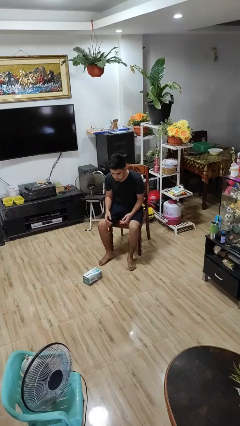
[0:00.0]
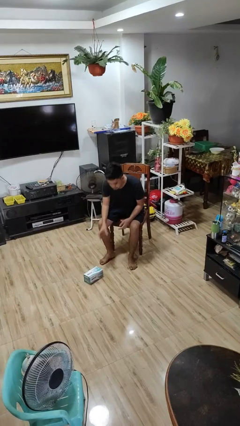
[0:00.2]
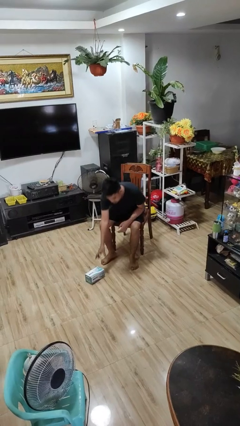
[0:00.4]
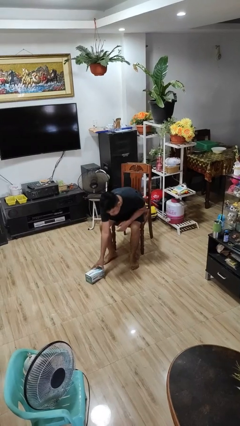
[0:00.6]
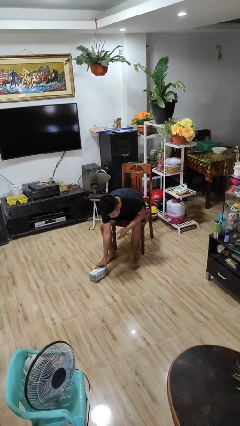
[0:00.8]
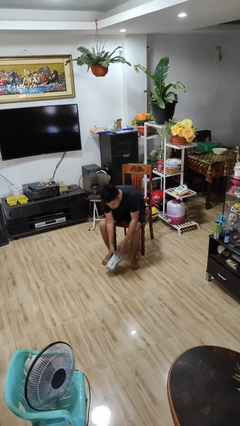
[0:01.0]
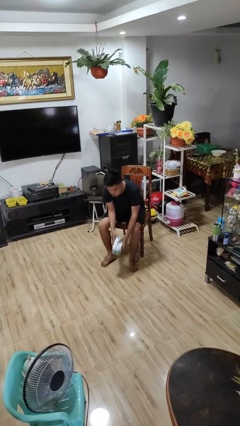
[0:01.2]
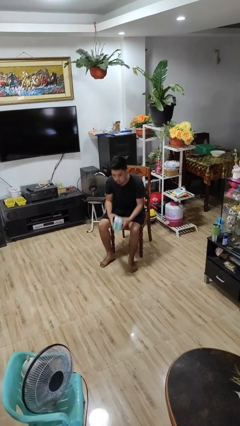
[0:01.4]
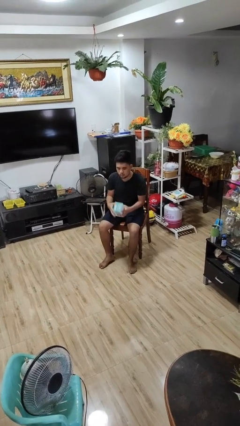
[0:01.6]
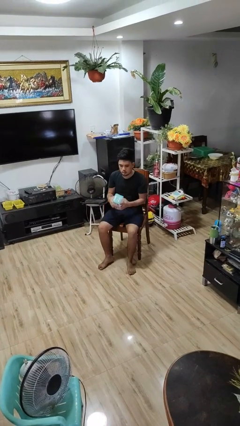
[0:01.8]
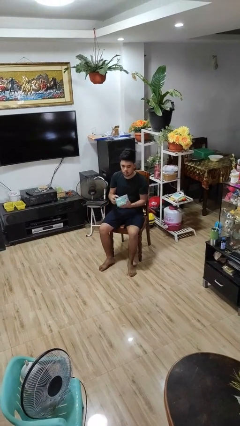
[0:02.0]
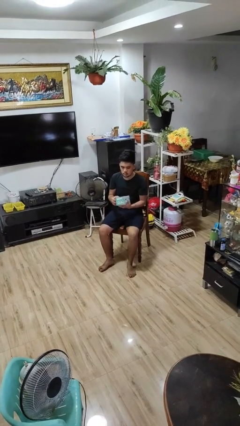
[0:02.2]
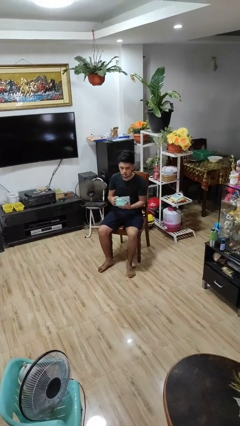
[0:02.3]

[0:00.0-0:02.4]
person picks up object from floor

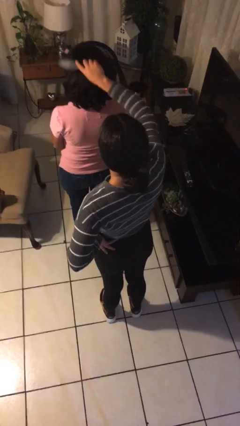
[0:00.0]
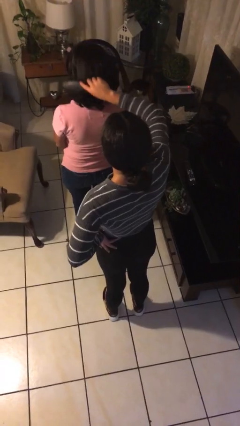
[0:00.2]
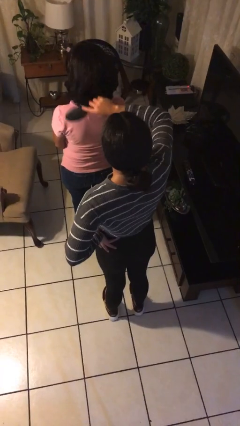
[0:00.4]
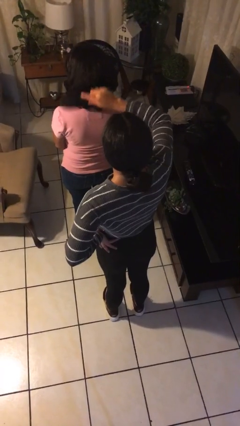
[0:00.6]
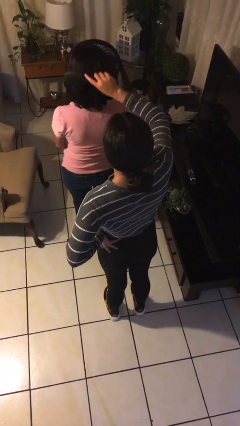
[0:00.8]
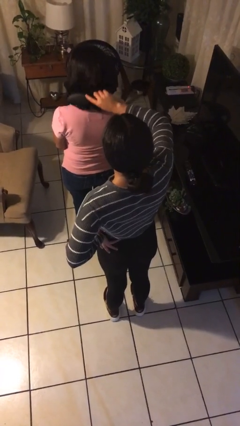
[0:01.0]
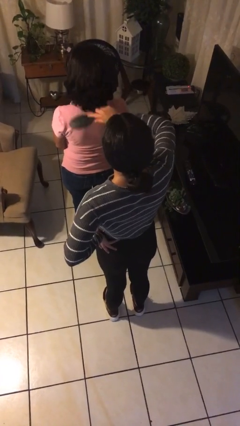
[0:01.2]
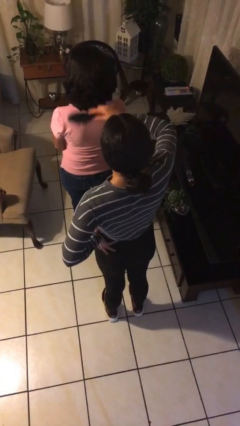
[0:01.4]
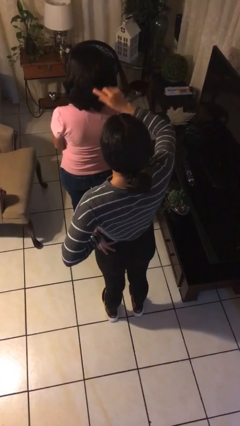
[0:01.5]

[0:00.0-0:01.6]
person brushes hair of person

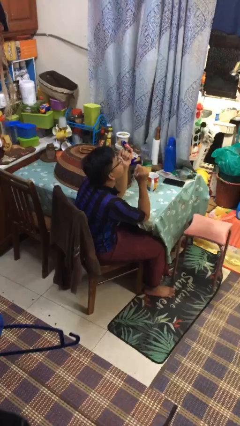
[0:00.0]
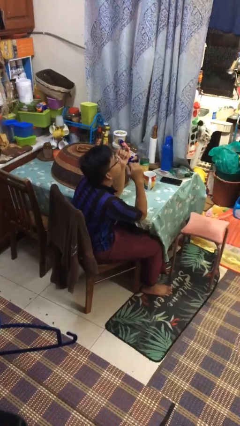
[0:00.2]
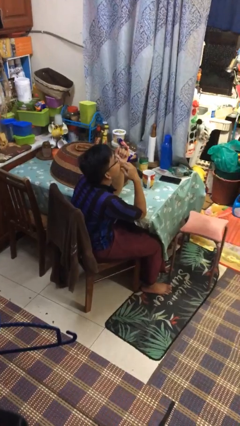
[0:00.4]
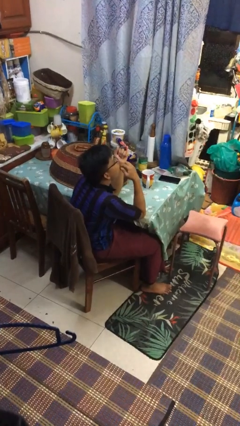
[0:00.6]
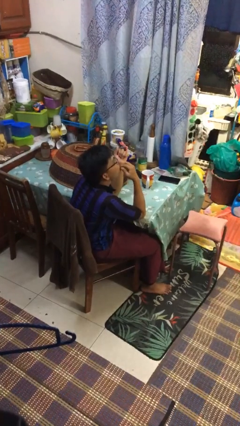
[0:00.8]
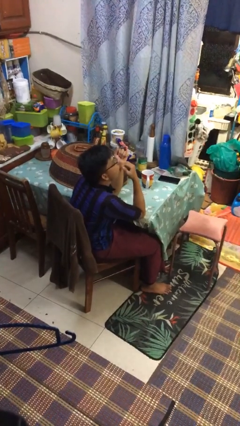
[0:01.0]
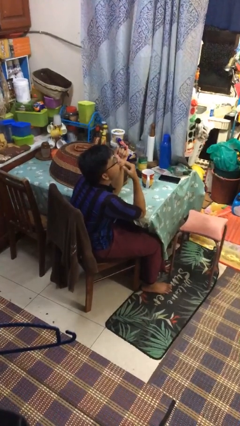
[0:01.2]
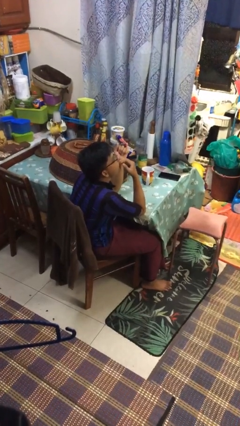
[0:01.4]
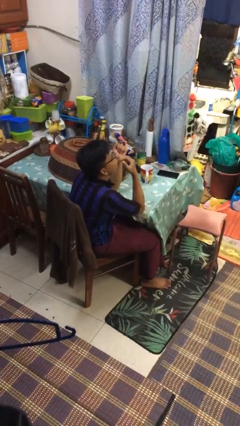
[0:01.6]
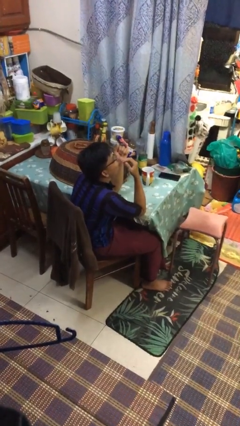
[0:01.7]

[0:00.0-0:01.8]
person licks fingers

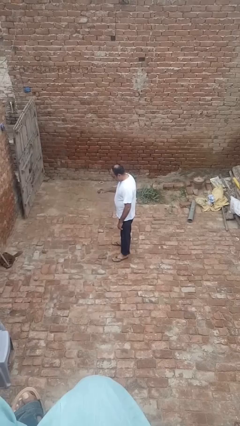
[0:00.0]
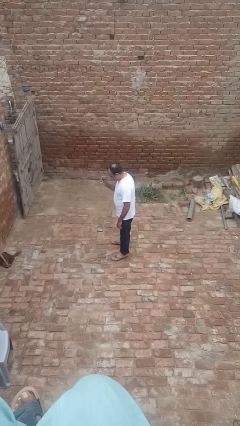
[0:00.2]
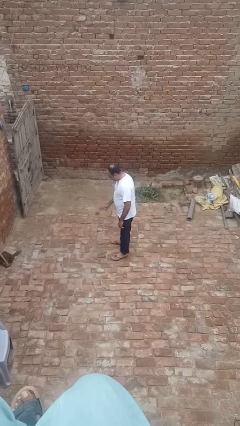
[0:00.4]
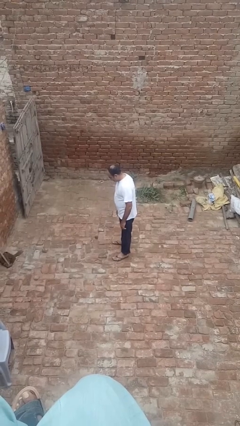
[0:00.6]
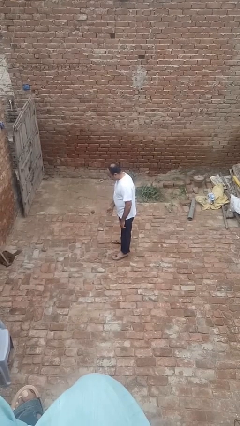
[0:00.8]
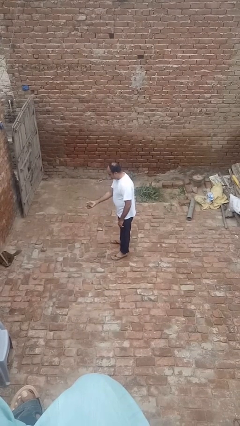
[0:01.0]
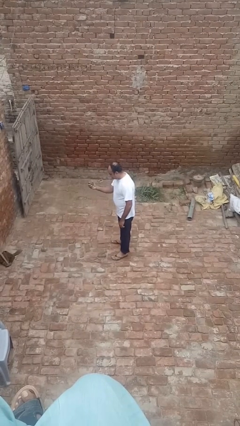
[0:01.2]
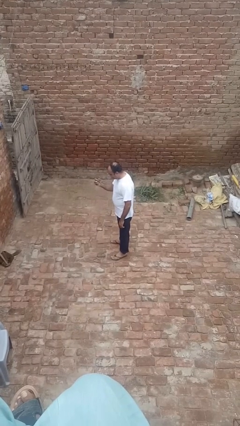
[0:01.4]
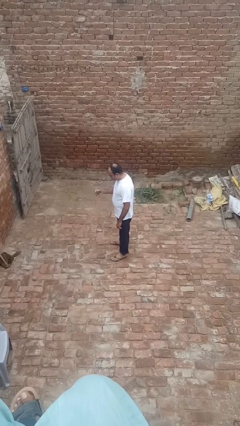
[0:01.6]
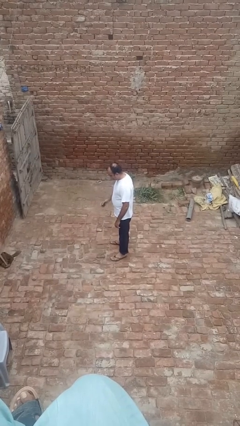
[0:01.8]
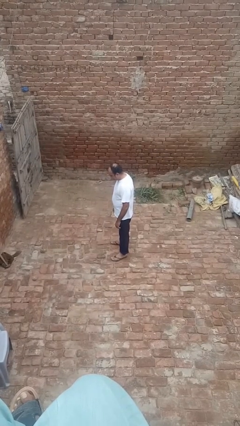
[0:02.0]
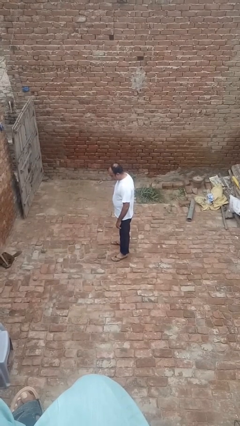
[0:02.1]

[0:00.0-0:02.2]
person bounces ball on floor

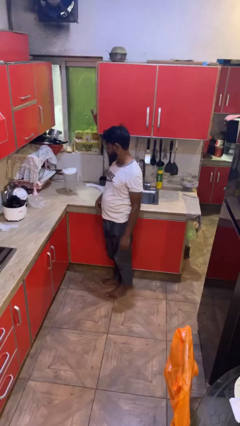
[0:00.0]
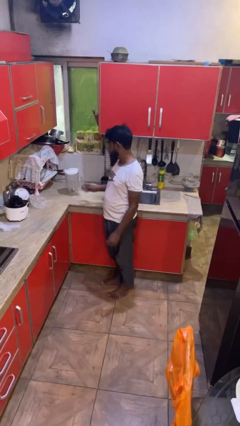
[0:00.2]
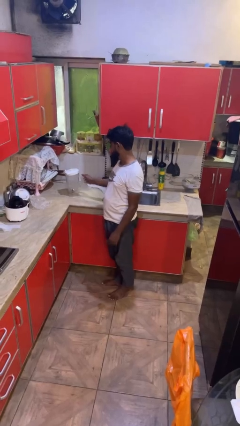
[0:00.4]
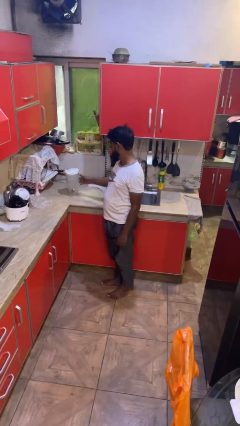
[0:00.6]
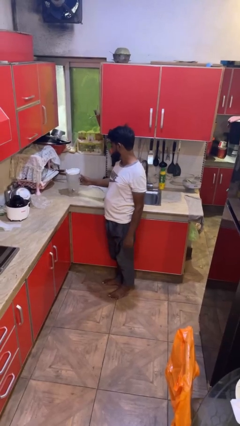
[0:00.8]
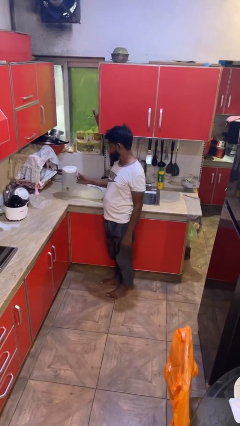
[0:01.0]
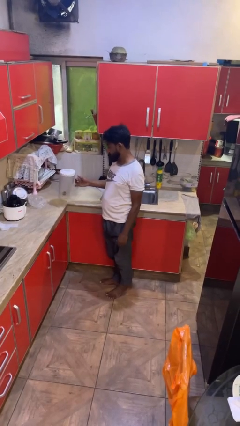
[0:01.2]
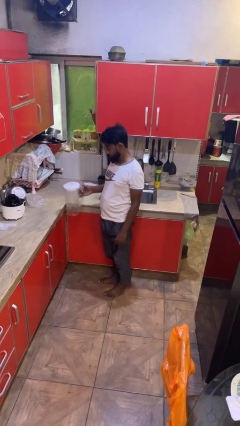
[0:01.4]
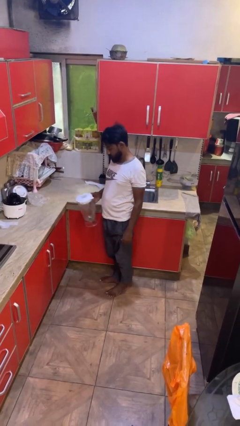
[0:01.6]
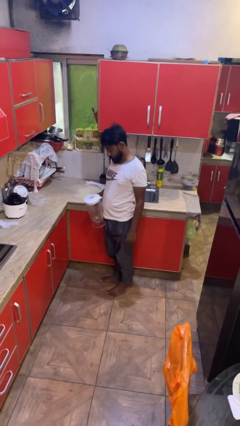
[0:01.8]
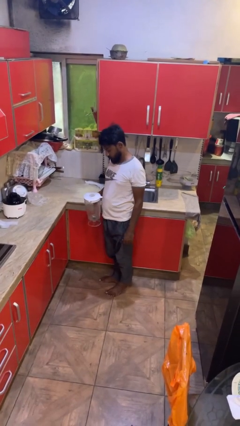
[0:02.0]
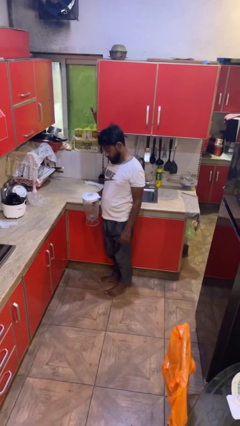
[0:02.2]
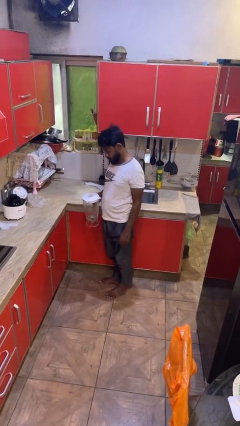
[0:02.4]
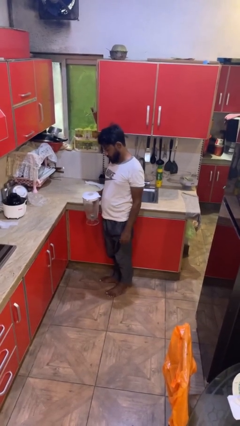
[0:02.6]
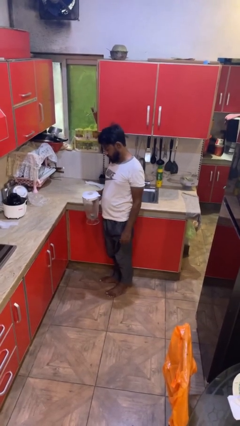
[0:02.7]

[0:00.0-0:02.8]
person picks up object from countertop

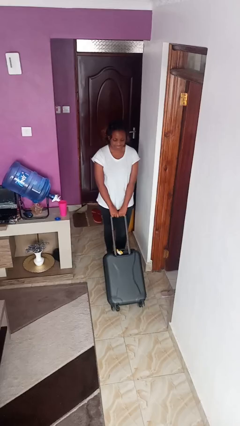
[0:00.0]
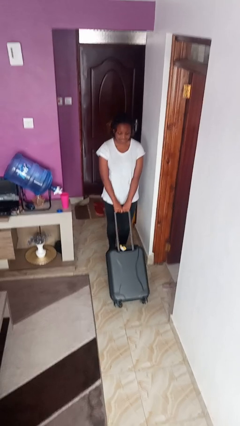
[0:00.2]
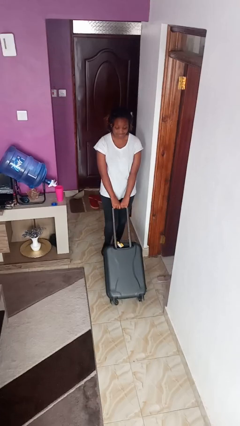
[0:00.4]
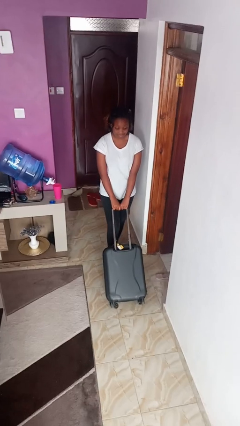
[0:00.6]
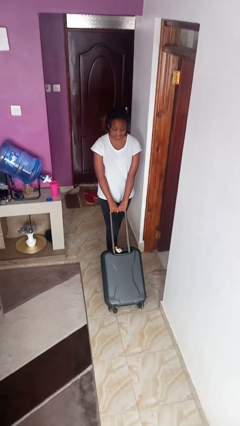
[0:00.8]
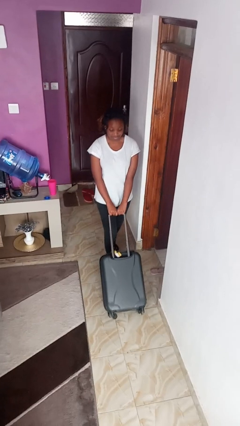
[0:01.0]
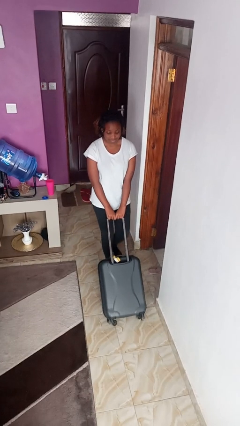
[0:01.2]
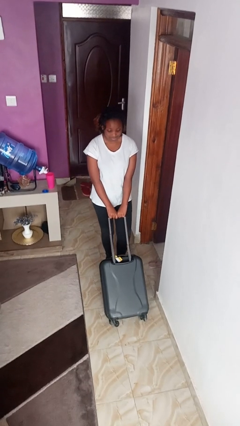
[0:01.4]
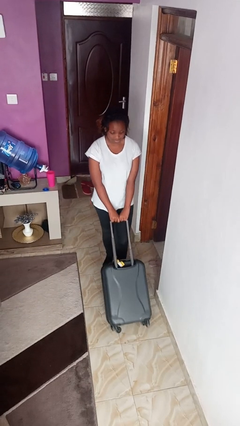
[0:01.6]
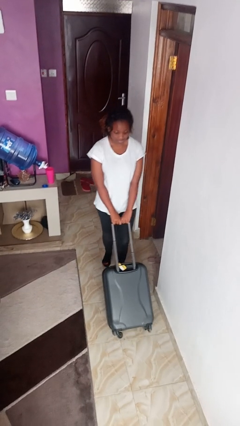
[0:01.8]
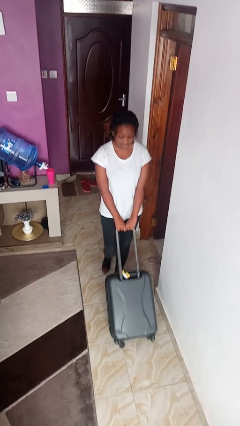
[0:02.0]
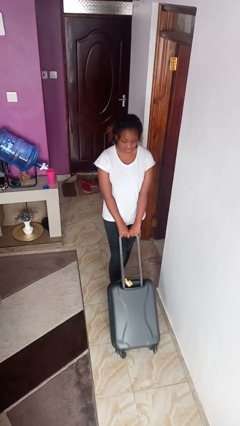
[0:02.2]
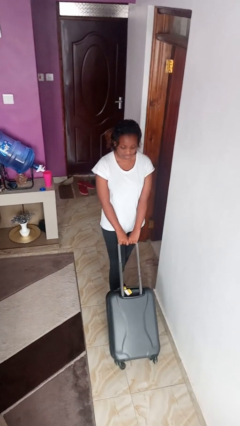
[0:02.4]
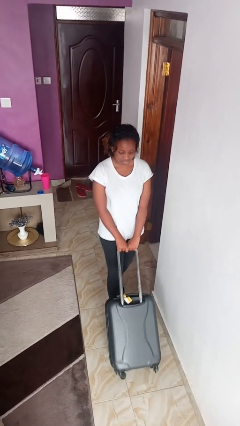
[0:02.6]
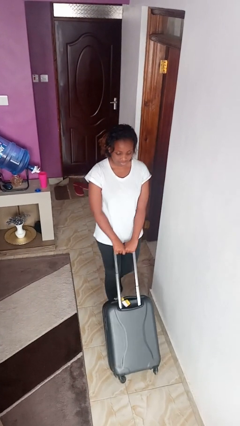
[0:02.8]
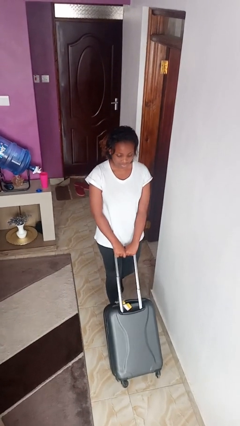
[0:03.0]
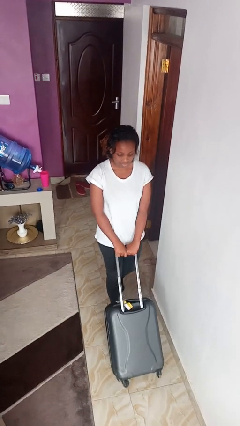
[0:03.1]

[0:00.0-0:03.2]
person pushes wheeled cart

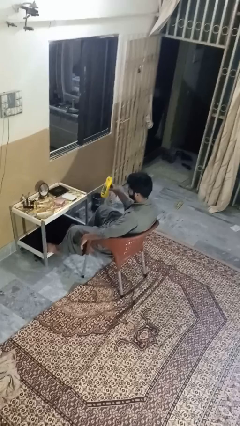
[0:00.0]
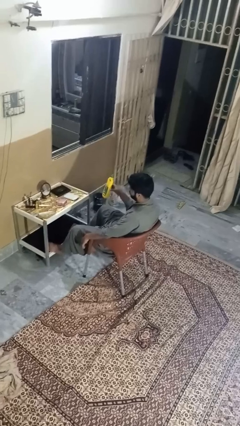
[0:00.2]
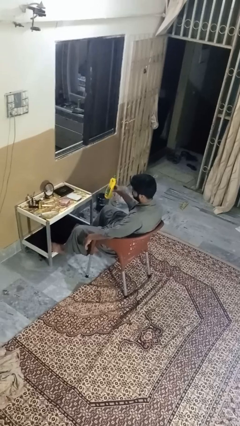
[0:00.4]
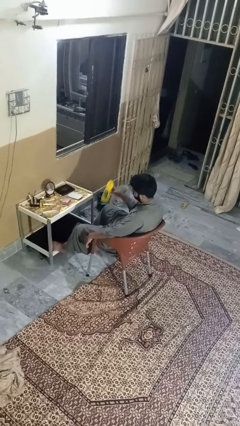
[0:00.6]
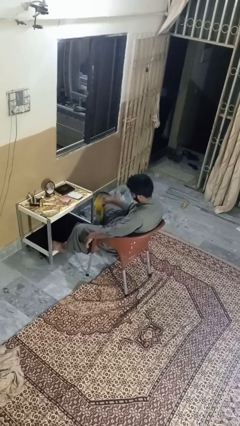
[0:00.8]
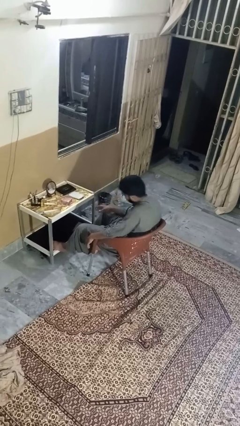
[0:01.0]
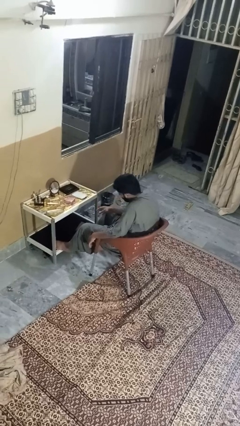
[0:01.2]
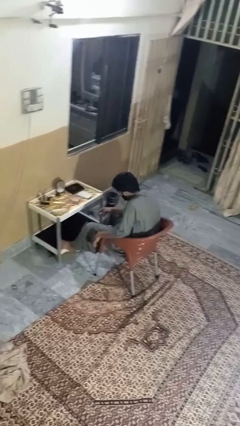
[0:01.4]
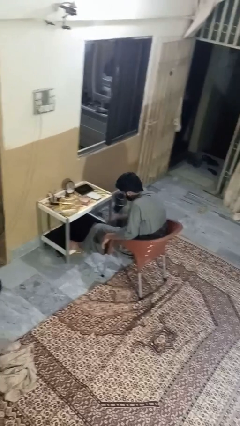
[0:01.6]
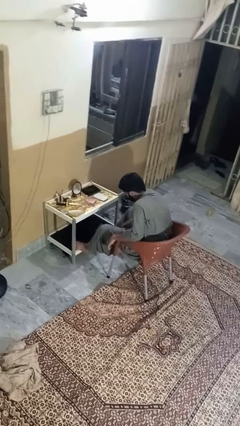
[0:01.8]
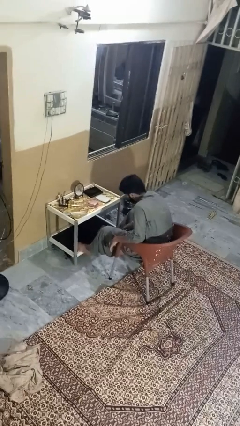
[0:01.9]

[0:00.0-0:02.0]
person throws object to ground

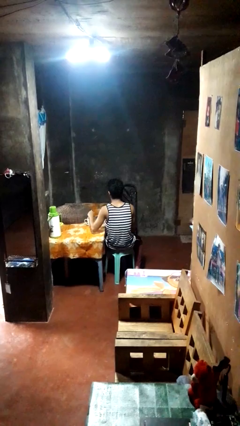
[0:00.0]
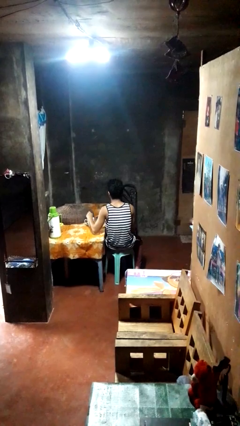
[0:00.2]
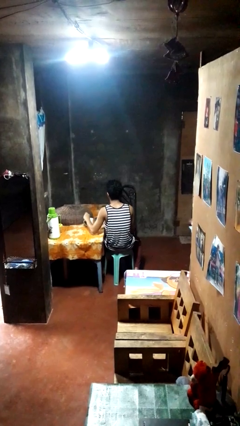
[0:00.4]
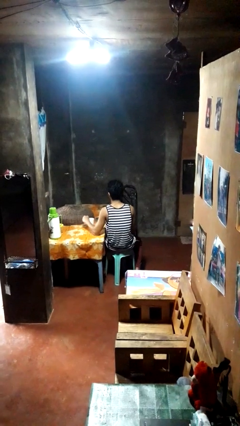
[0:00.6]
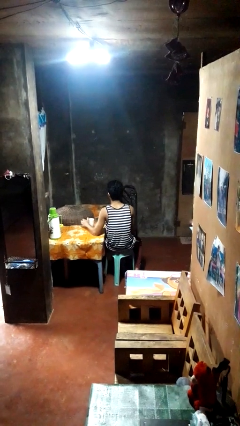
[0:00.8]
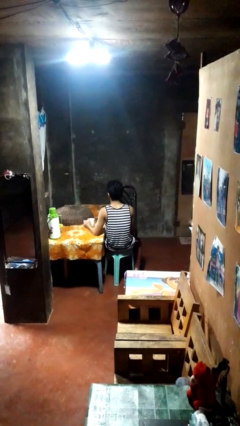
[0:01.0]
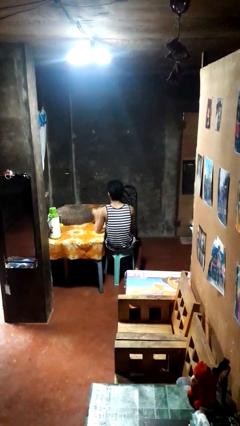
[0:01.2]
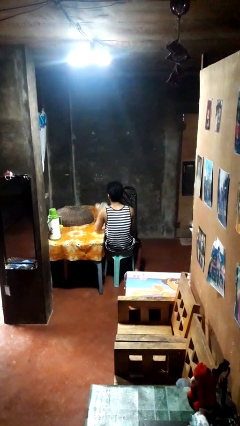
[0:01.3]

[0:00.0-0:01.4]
person stirs mug
